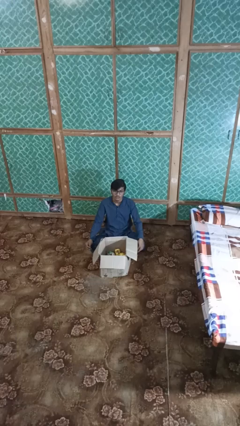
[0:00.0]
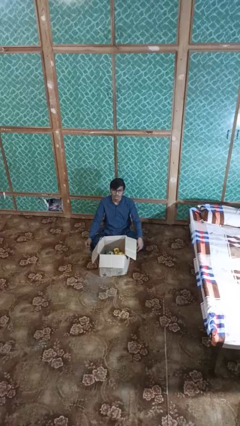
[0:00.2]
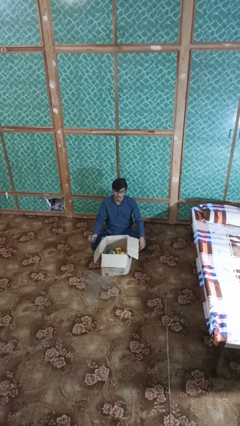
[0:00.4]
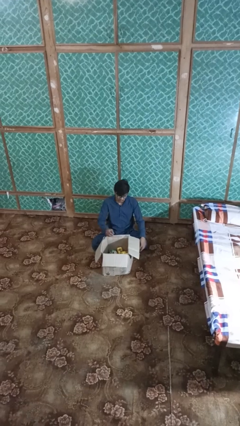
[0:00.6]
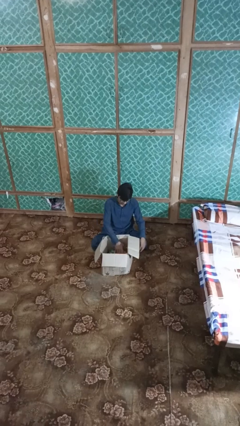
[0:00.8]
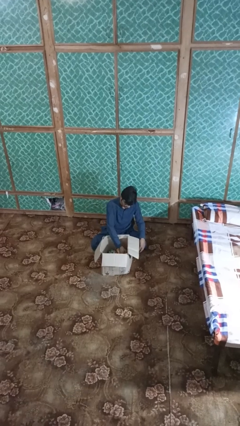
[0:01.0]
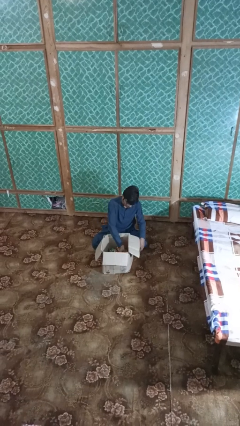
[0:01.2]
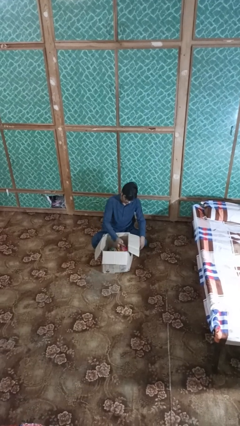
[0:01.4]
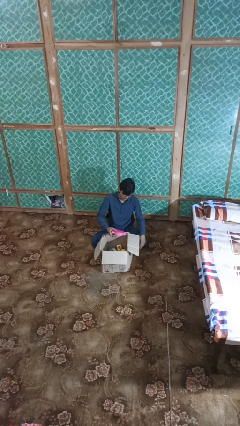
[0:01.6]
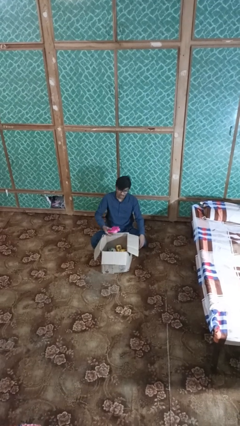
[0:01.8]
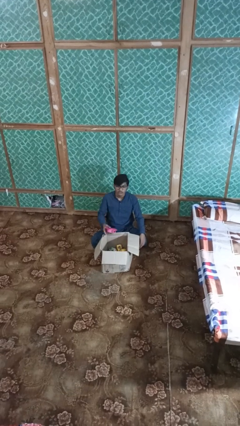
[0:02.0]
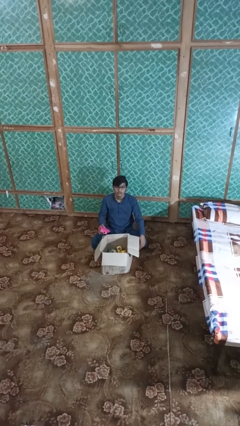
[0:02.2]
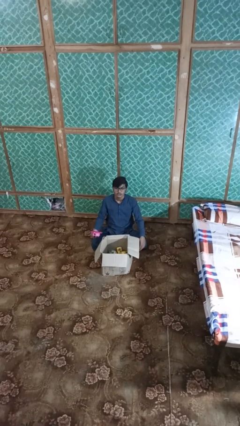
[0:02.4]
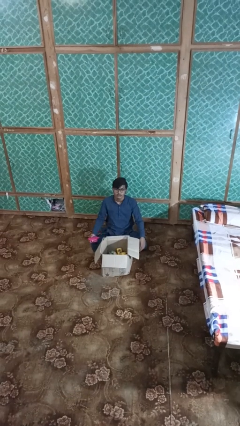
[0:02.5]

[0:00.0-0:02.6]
person takes object from box

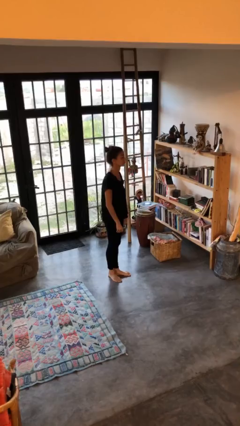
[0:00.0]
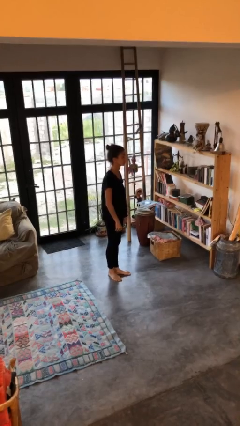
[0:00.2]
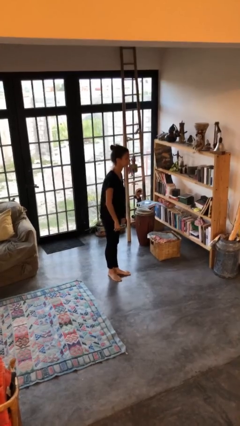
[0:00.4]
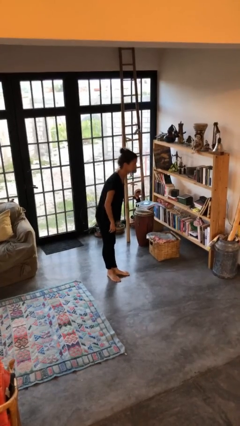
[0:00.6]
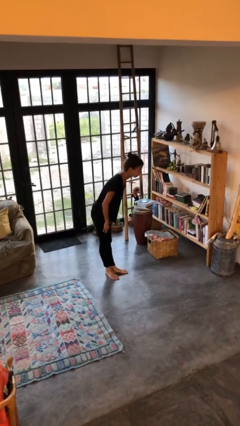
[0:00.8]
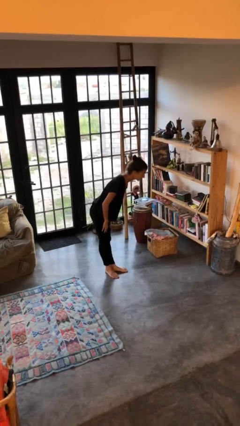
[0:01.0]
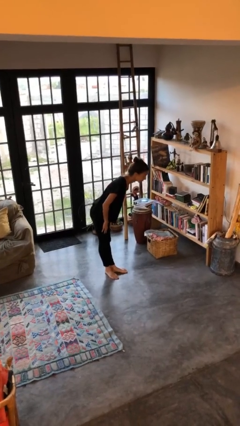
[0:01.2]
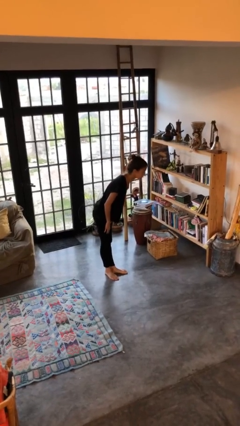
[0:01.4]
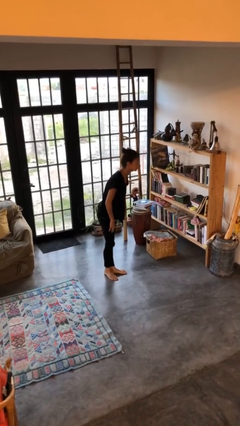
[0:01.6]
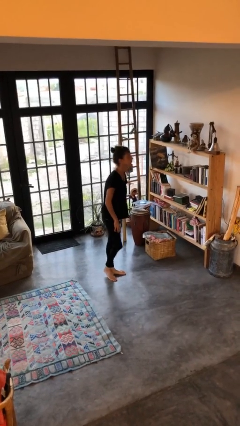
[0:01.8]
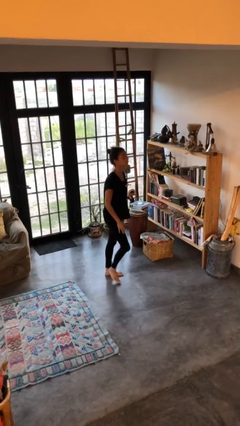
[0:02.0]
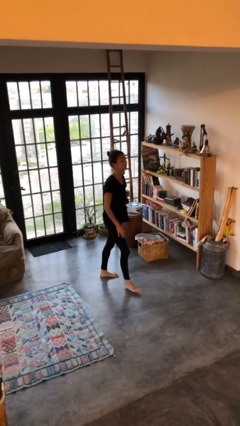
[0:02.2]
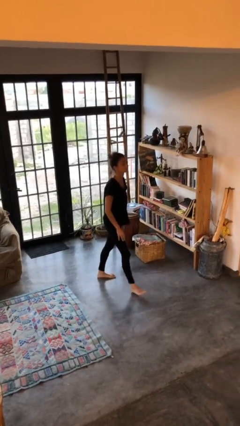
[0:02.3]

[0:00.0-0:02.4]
person bows

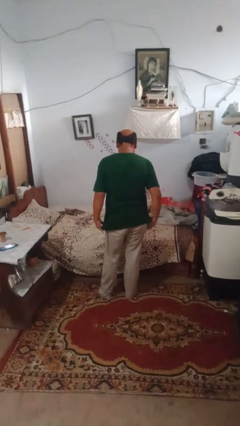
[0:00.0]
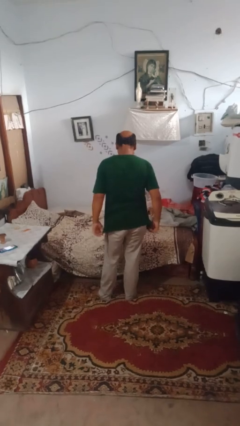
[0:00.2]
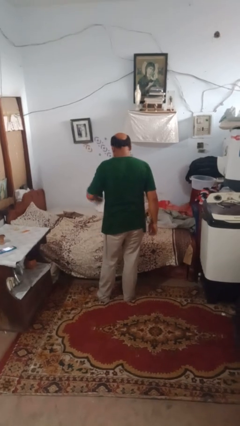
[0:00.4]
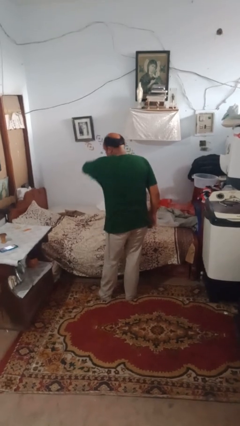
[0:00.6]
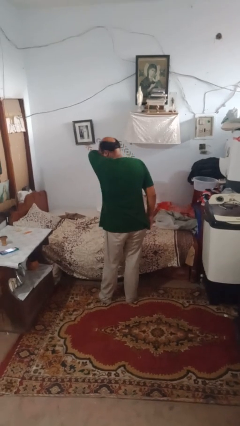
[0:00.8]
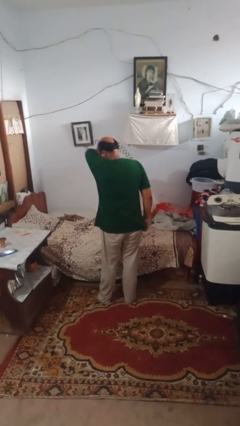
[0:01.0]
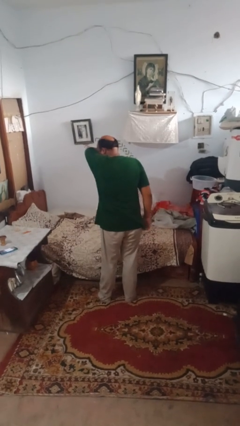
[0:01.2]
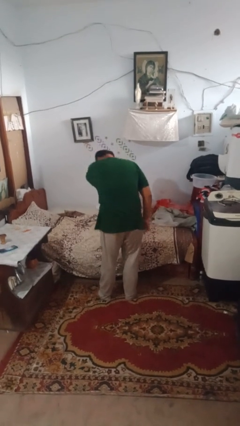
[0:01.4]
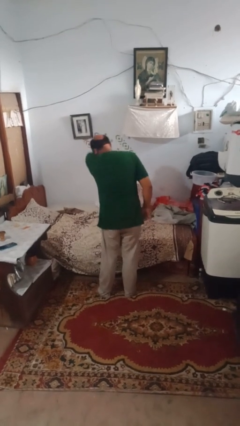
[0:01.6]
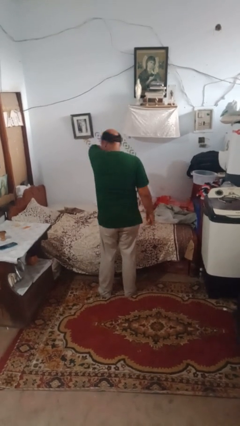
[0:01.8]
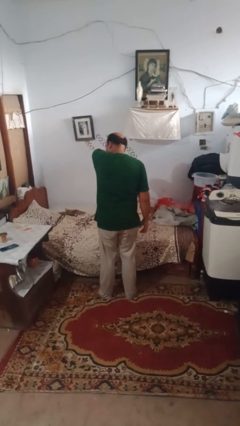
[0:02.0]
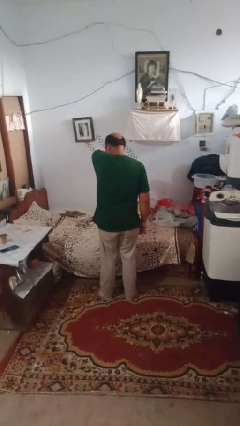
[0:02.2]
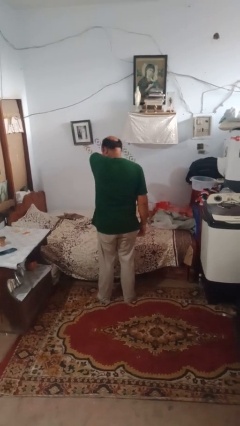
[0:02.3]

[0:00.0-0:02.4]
person sneezes into arm

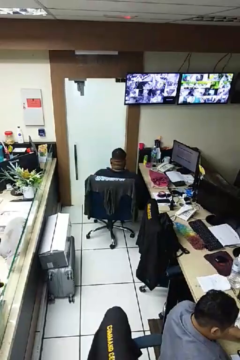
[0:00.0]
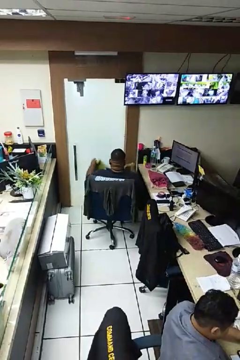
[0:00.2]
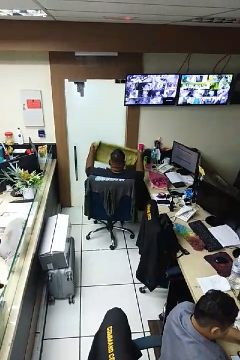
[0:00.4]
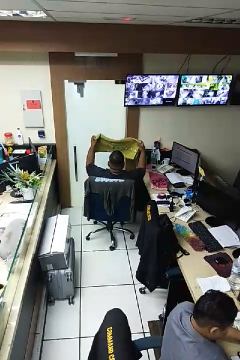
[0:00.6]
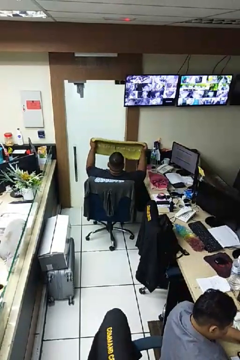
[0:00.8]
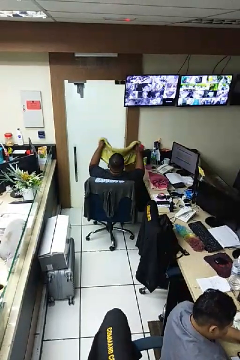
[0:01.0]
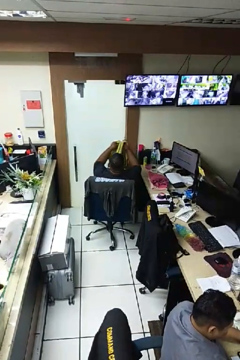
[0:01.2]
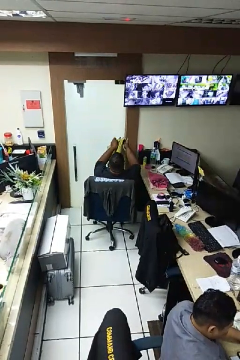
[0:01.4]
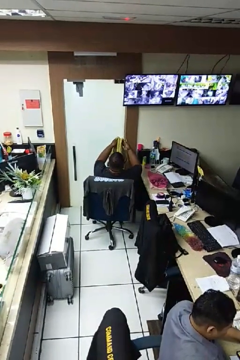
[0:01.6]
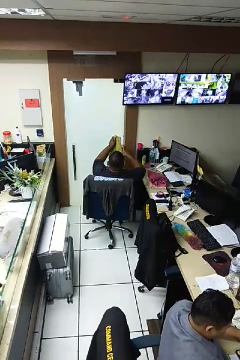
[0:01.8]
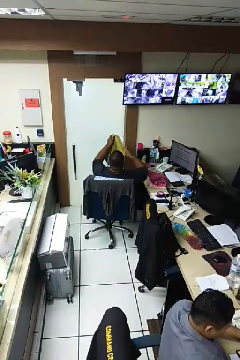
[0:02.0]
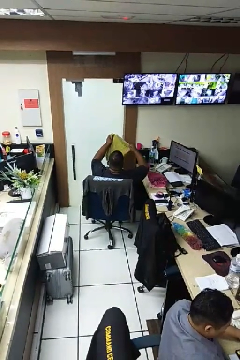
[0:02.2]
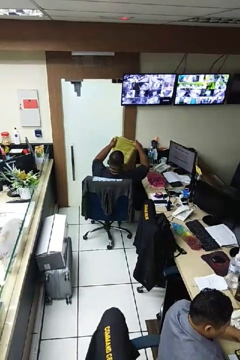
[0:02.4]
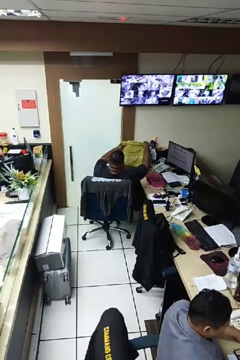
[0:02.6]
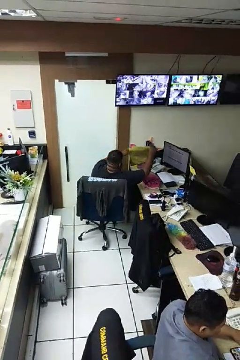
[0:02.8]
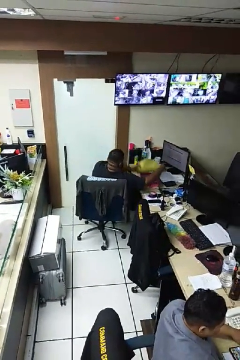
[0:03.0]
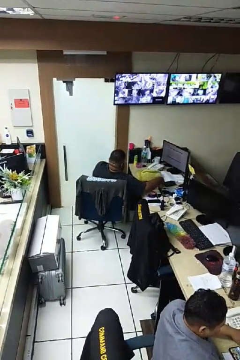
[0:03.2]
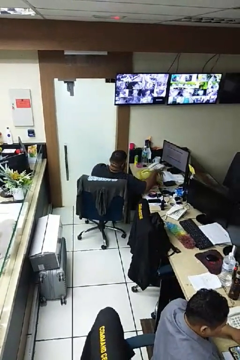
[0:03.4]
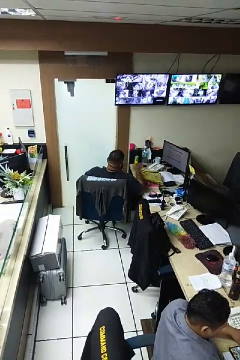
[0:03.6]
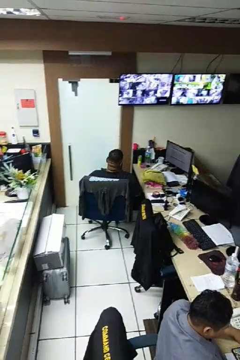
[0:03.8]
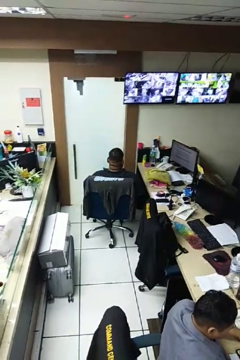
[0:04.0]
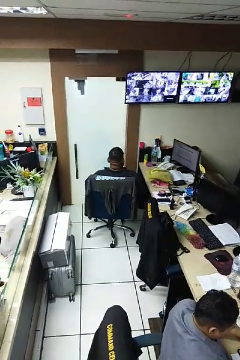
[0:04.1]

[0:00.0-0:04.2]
person folds towel

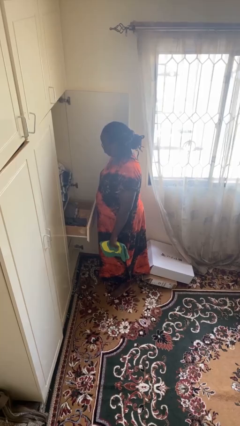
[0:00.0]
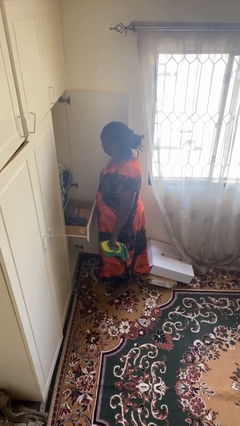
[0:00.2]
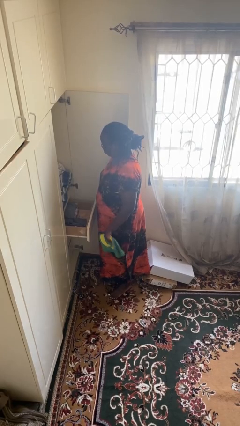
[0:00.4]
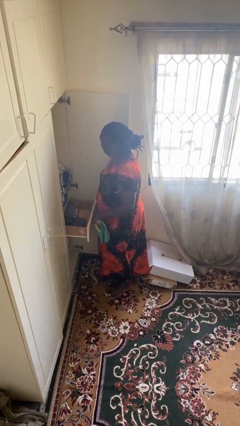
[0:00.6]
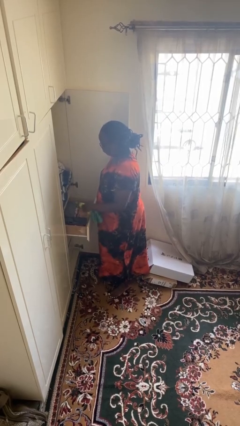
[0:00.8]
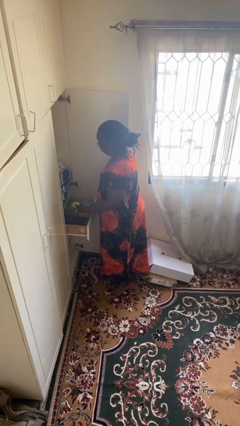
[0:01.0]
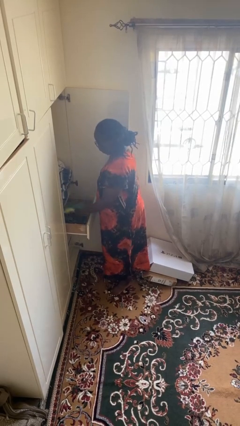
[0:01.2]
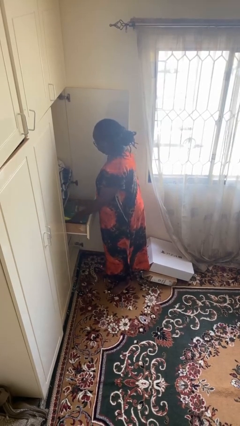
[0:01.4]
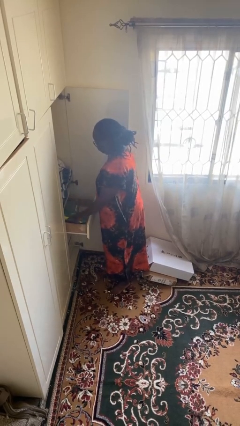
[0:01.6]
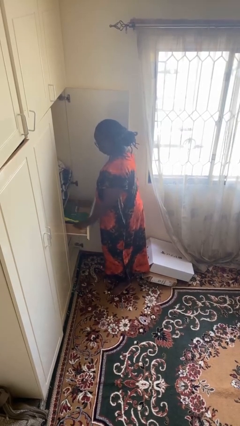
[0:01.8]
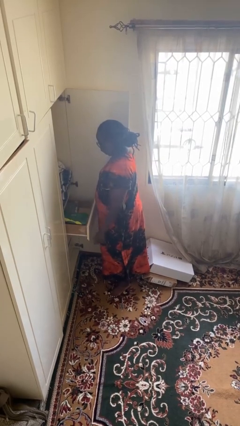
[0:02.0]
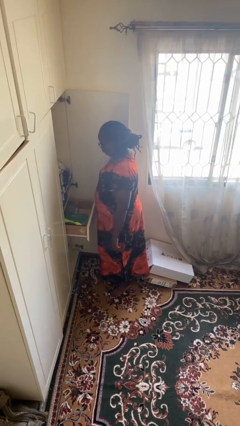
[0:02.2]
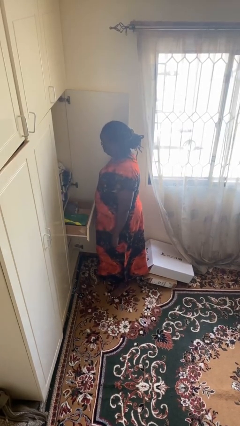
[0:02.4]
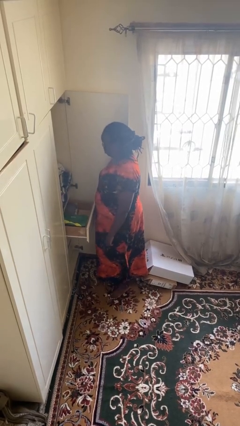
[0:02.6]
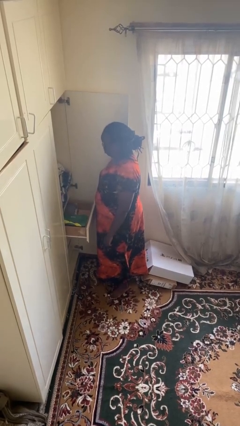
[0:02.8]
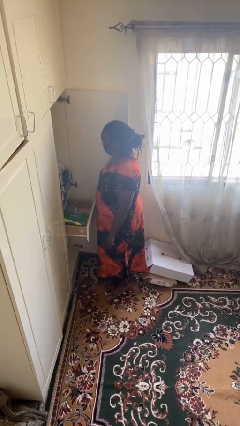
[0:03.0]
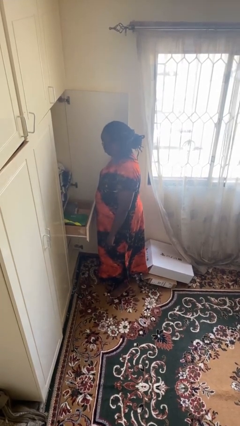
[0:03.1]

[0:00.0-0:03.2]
person puts clothes into dresser

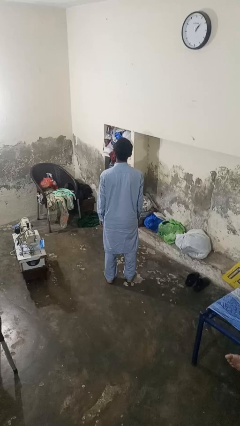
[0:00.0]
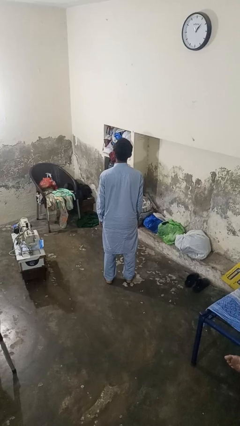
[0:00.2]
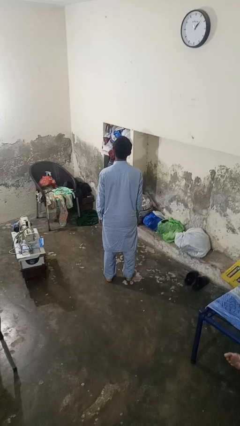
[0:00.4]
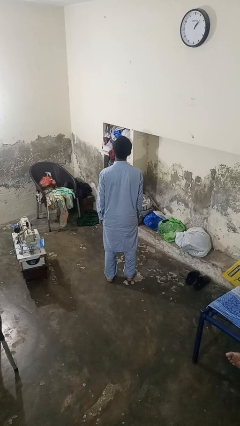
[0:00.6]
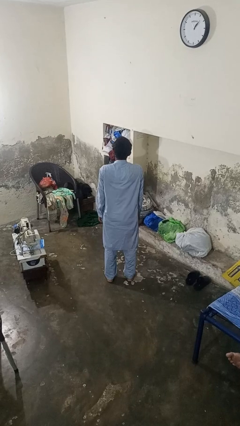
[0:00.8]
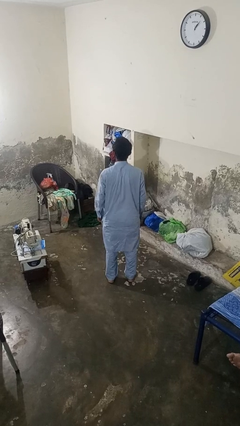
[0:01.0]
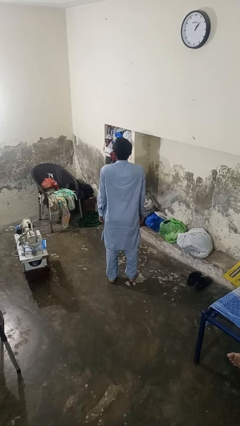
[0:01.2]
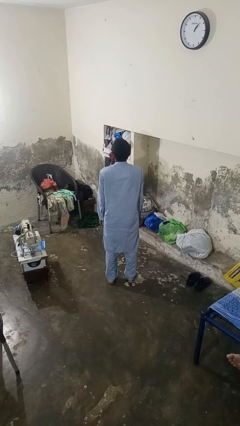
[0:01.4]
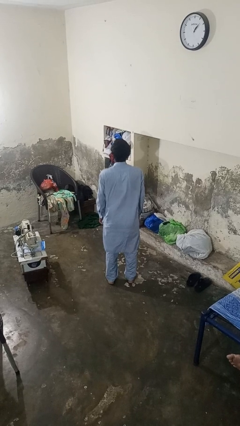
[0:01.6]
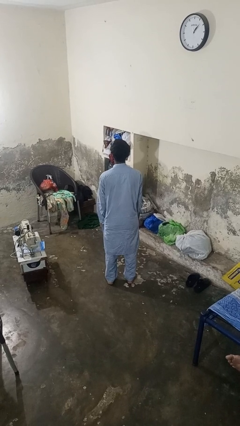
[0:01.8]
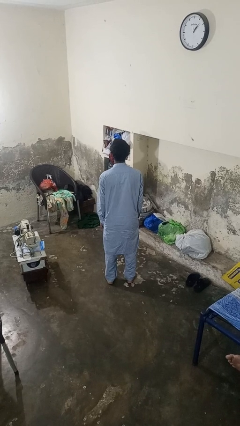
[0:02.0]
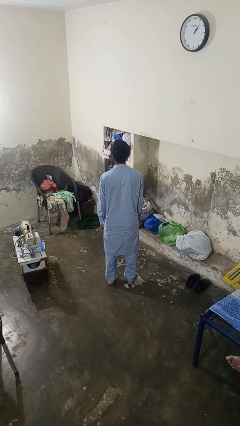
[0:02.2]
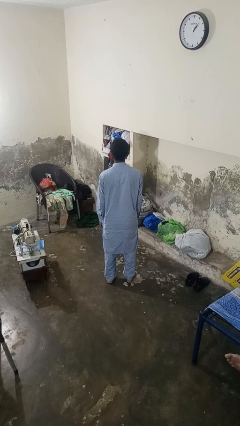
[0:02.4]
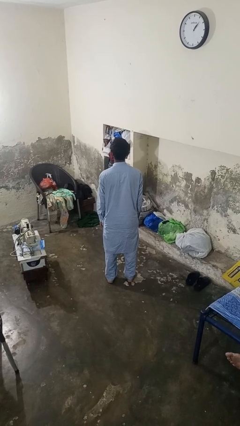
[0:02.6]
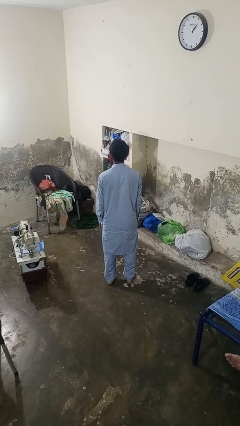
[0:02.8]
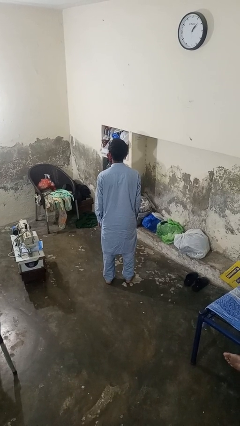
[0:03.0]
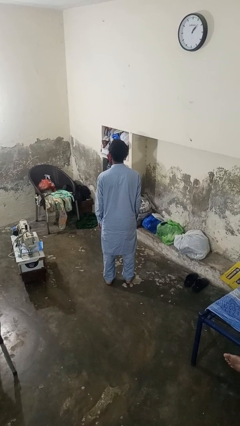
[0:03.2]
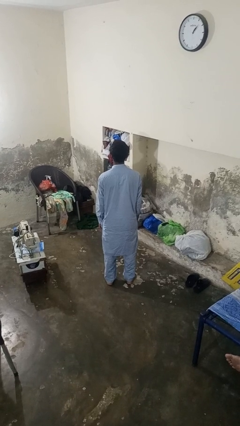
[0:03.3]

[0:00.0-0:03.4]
person shrugs
